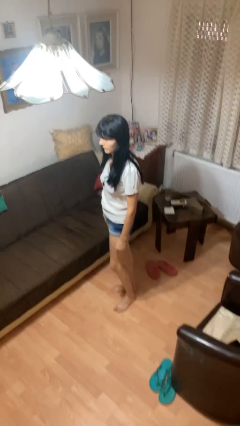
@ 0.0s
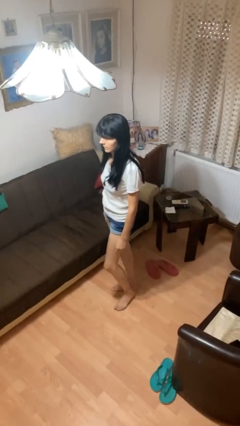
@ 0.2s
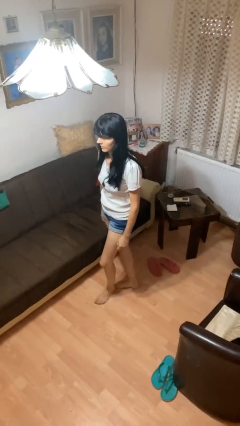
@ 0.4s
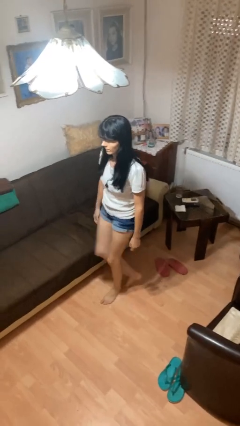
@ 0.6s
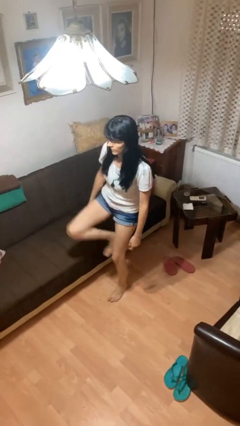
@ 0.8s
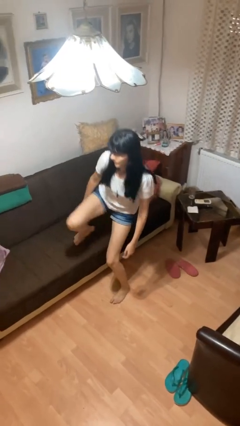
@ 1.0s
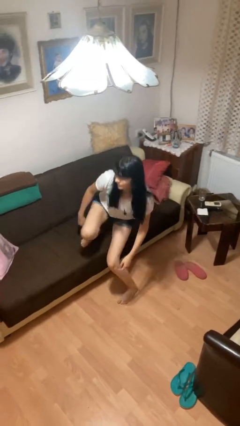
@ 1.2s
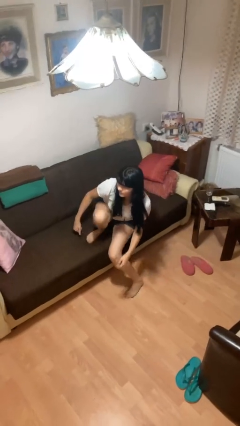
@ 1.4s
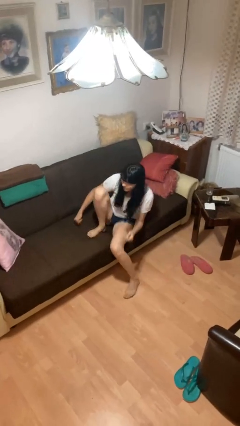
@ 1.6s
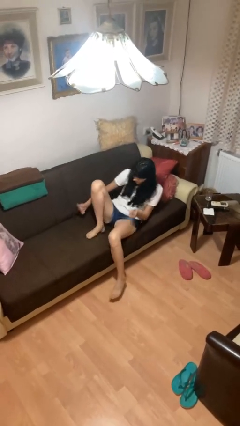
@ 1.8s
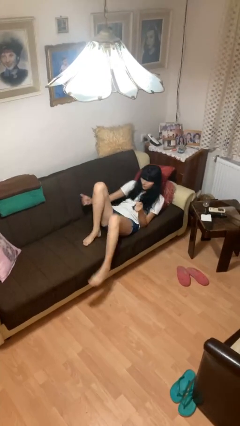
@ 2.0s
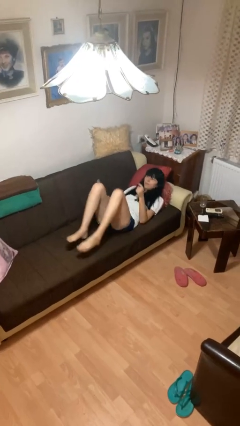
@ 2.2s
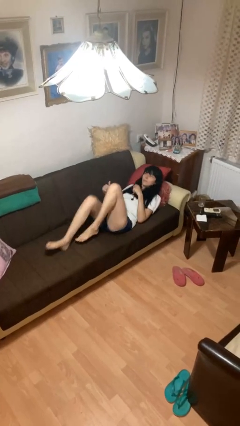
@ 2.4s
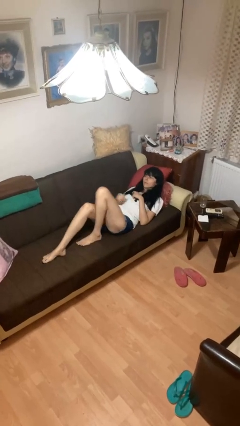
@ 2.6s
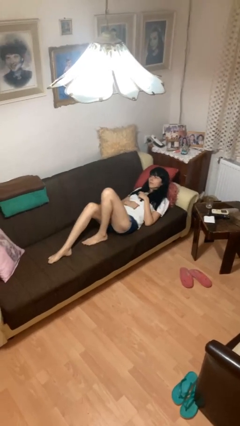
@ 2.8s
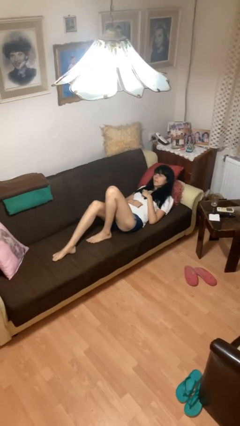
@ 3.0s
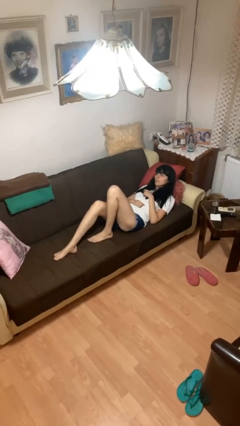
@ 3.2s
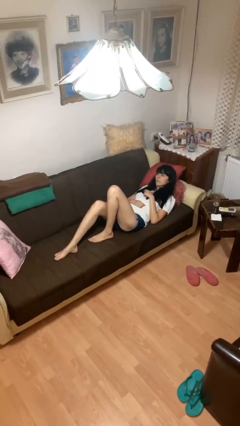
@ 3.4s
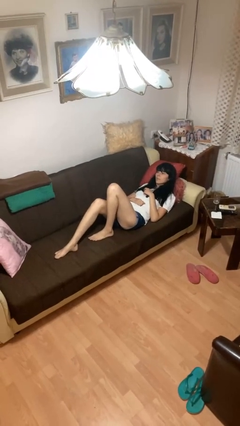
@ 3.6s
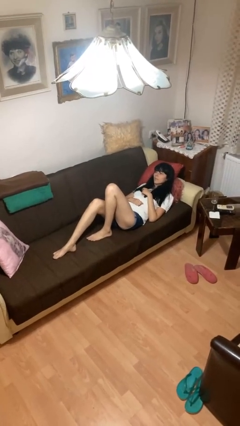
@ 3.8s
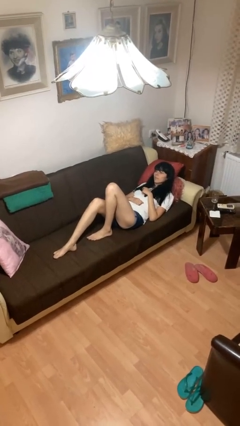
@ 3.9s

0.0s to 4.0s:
person lies down on couch

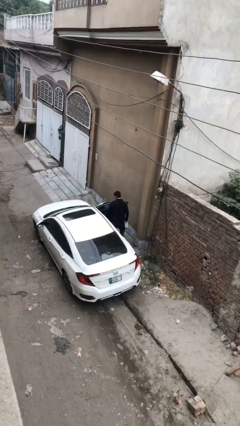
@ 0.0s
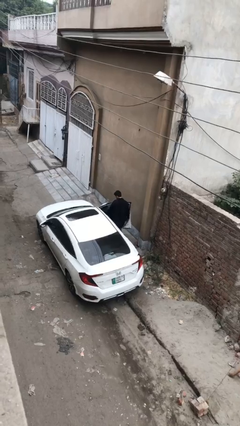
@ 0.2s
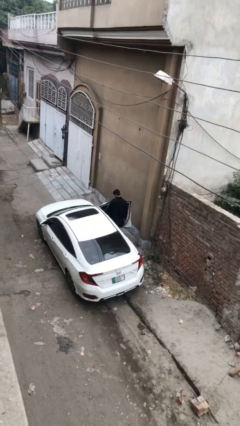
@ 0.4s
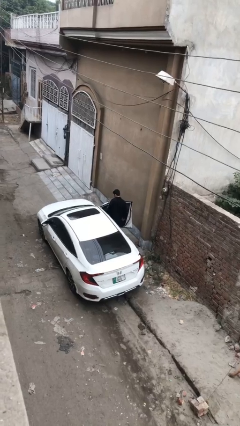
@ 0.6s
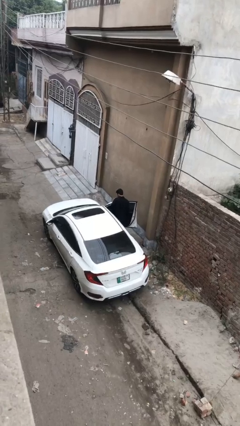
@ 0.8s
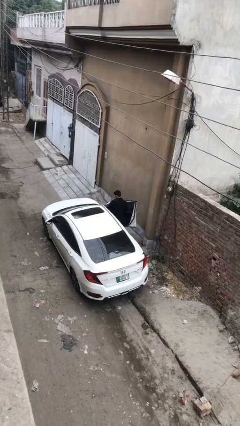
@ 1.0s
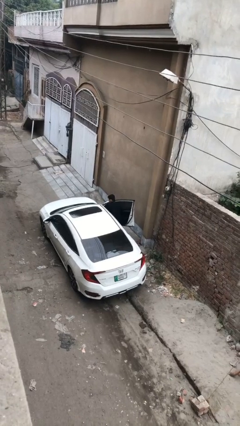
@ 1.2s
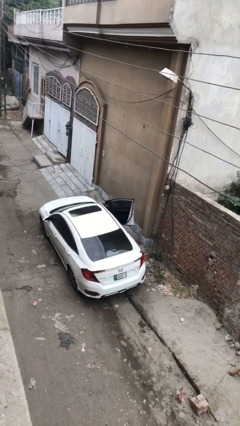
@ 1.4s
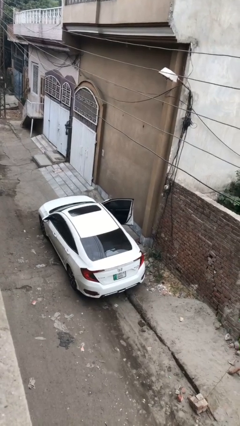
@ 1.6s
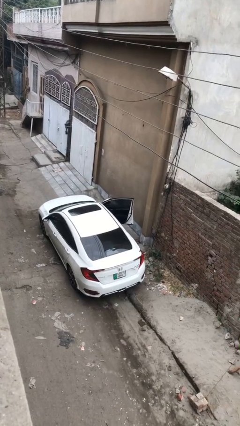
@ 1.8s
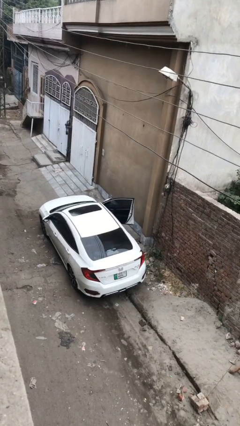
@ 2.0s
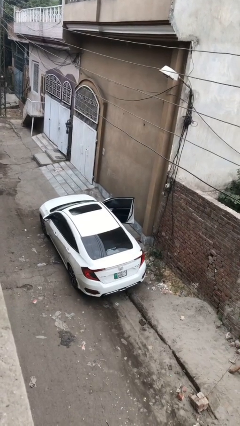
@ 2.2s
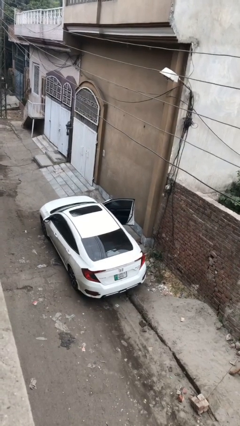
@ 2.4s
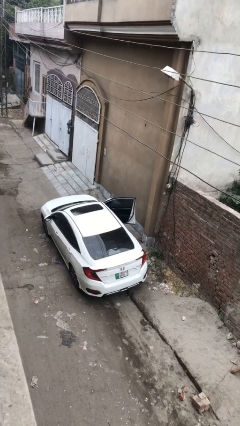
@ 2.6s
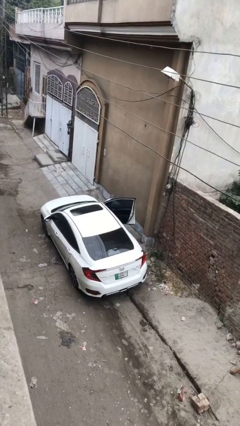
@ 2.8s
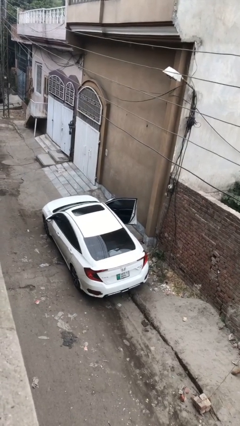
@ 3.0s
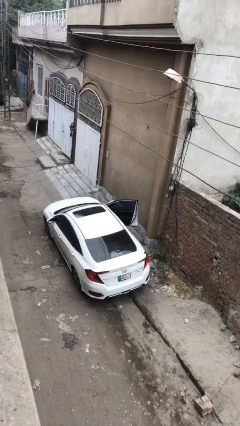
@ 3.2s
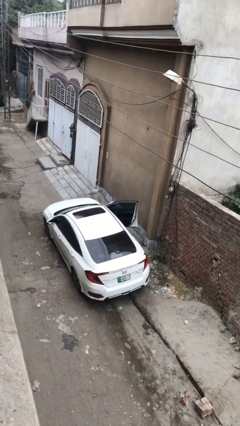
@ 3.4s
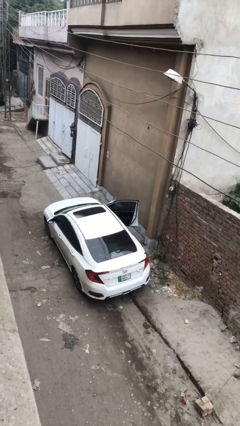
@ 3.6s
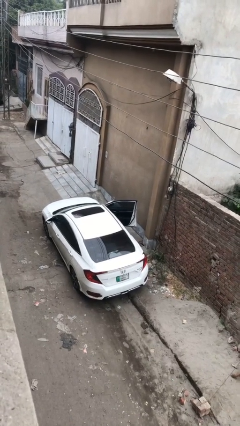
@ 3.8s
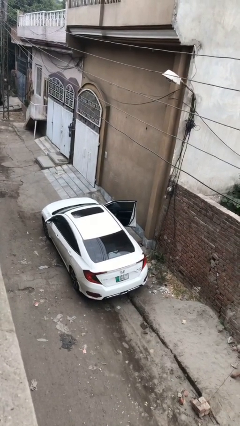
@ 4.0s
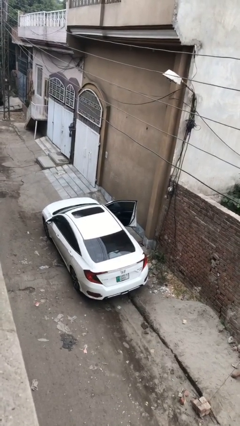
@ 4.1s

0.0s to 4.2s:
person enters car

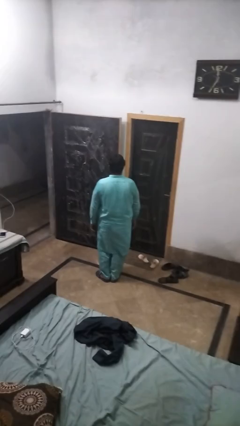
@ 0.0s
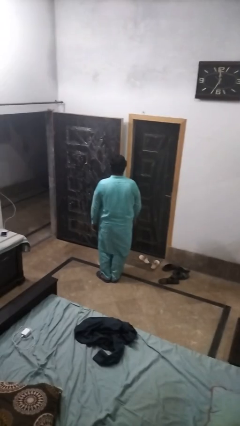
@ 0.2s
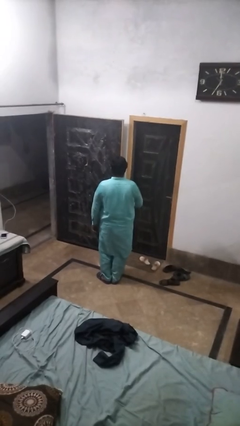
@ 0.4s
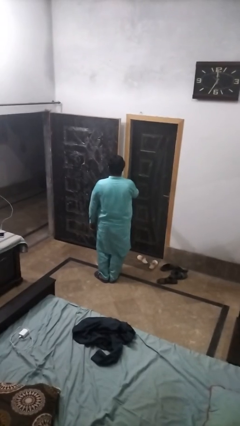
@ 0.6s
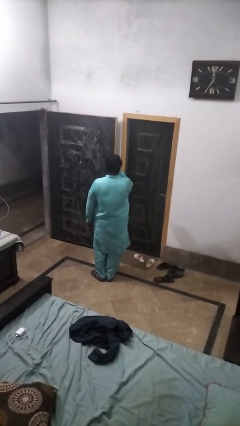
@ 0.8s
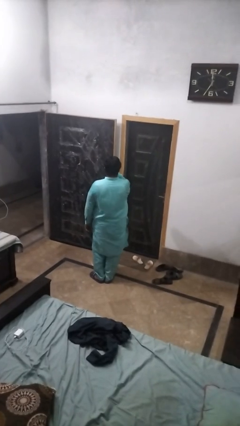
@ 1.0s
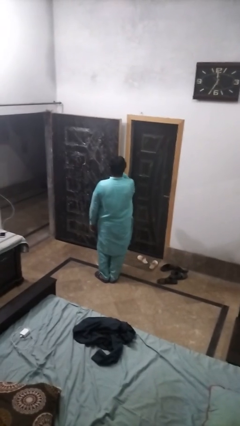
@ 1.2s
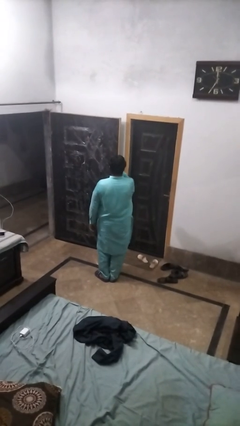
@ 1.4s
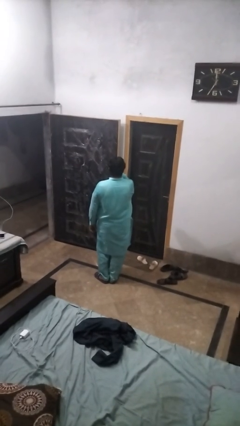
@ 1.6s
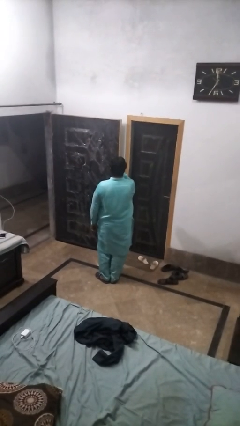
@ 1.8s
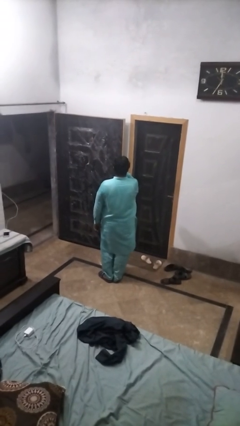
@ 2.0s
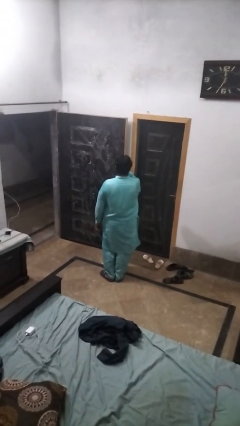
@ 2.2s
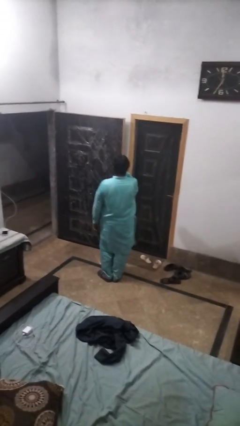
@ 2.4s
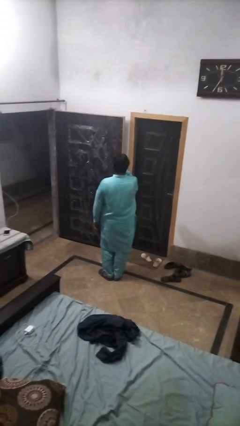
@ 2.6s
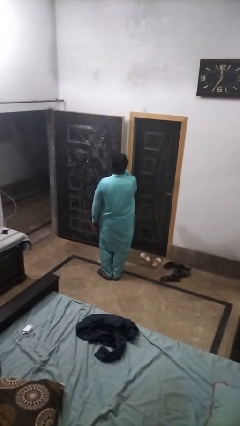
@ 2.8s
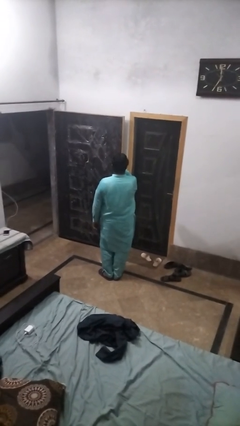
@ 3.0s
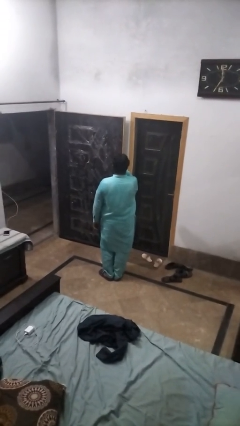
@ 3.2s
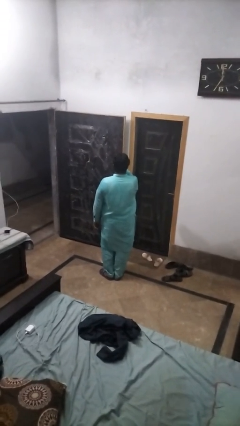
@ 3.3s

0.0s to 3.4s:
person licks fingers

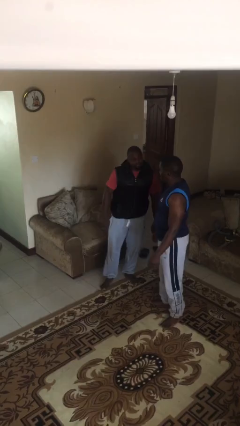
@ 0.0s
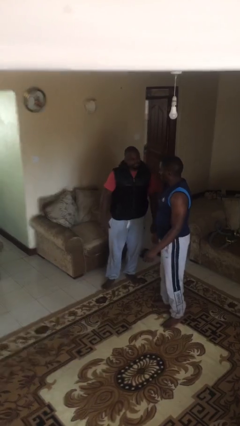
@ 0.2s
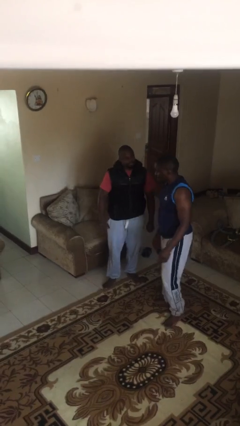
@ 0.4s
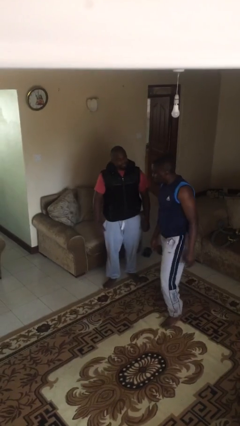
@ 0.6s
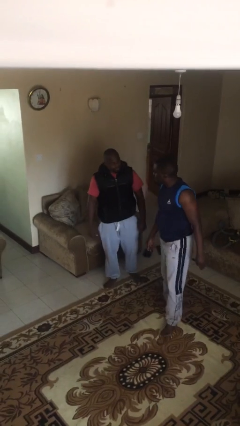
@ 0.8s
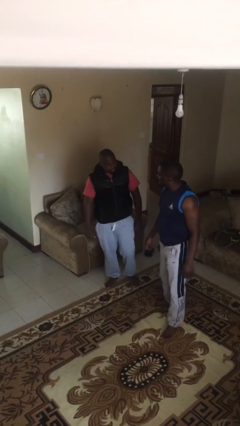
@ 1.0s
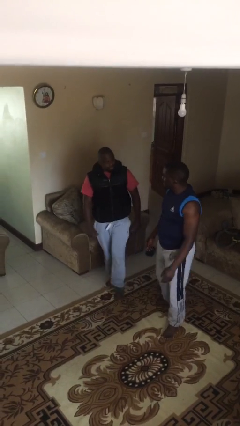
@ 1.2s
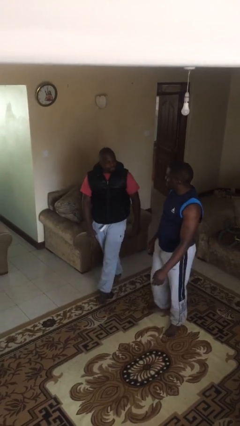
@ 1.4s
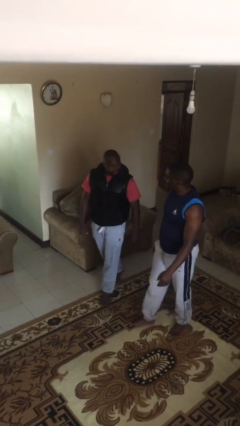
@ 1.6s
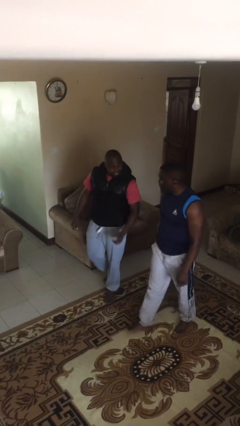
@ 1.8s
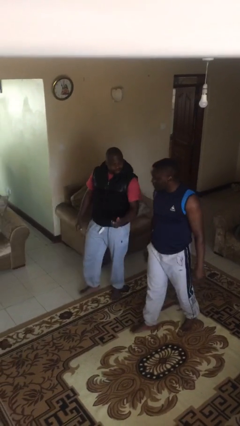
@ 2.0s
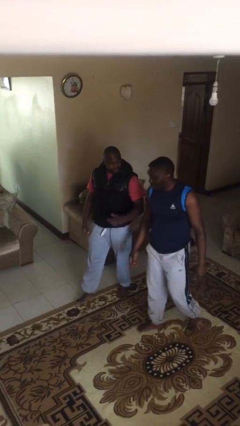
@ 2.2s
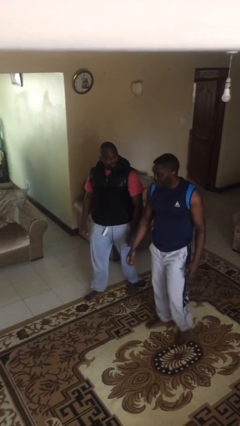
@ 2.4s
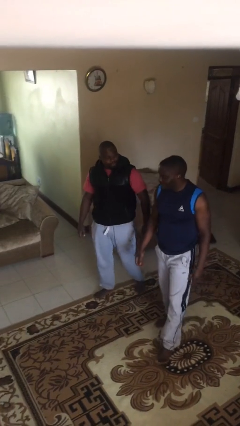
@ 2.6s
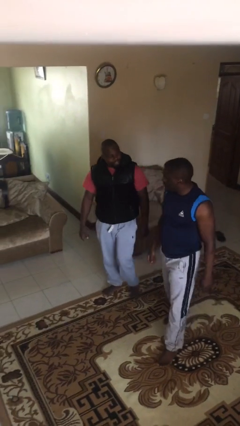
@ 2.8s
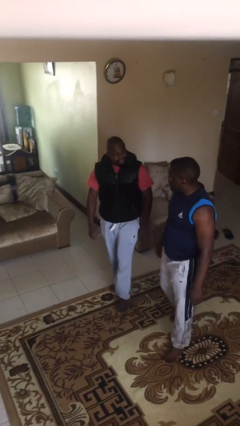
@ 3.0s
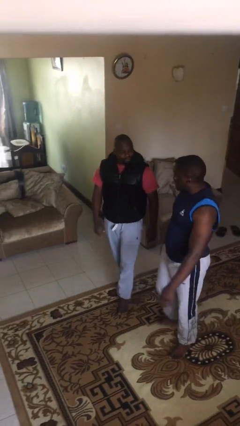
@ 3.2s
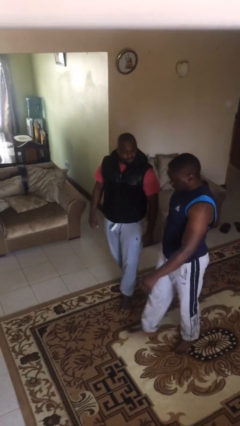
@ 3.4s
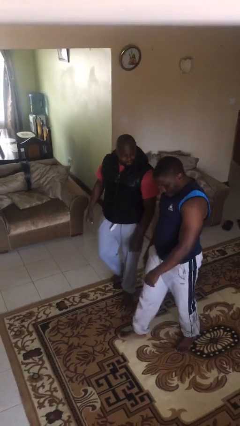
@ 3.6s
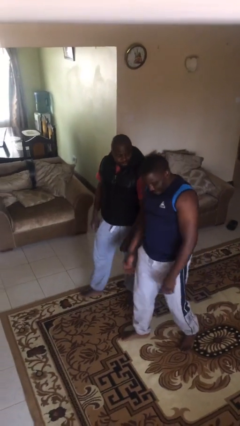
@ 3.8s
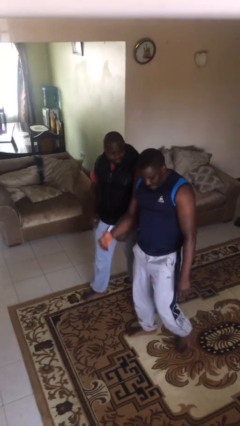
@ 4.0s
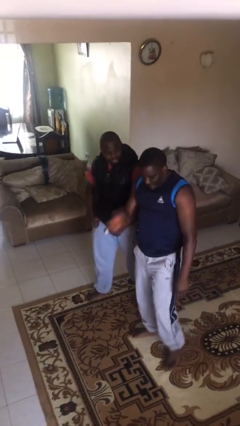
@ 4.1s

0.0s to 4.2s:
person talks to person

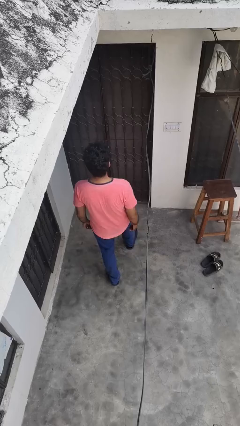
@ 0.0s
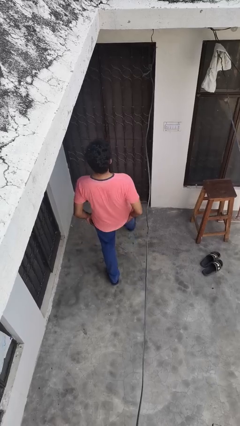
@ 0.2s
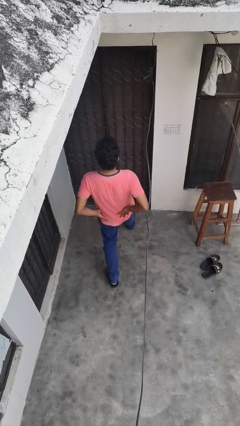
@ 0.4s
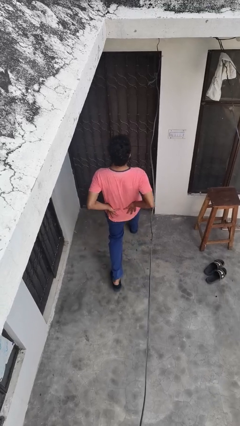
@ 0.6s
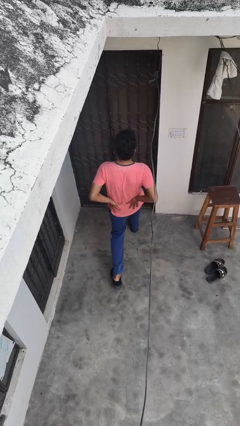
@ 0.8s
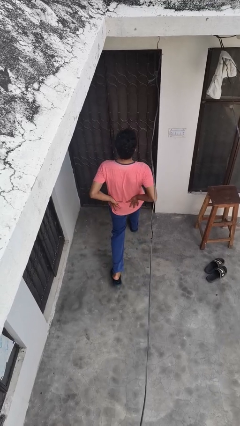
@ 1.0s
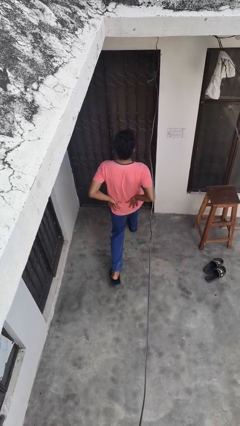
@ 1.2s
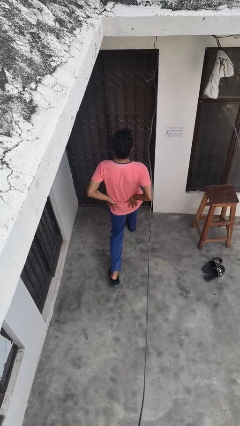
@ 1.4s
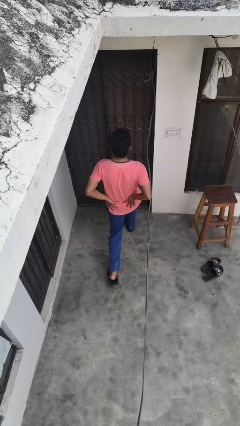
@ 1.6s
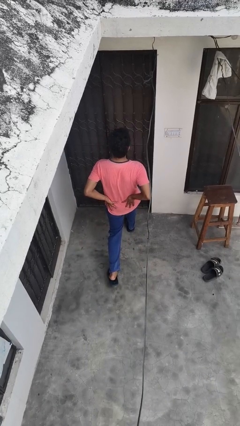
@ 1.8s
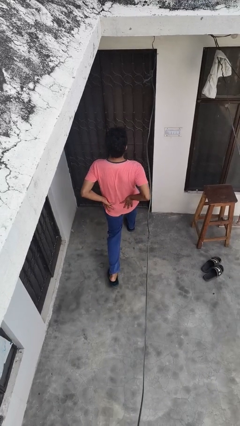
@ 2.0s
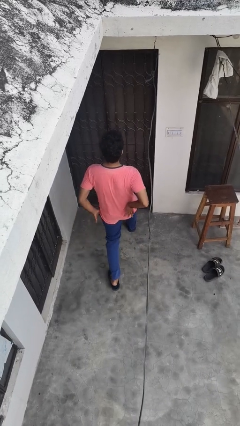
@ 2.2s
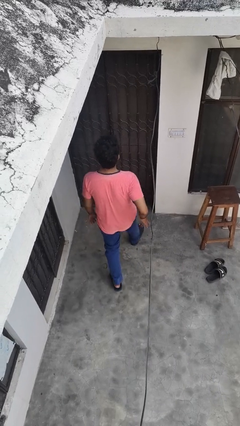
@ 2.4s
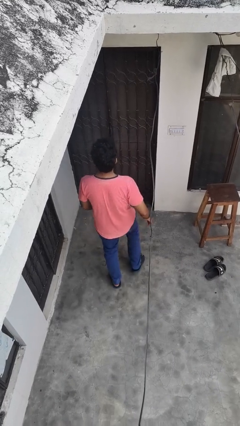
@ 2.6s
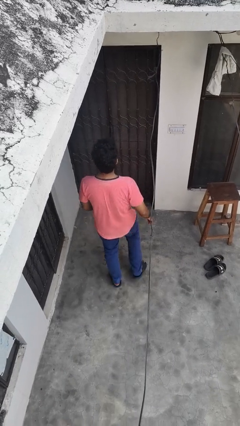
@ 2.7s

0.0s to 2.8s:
person exercises with lunges
